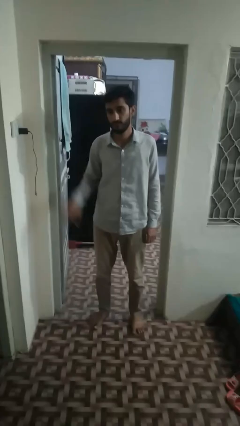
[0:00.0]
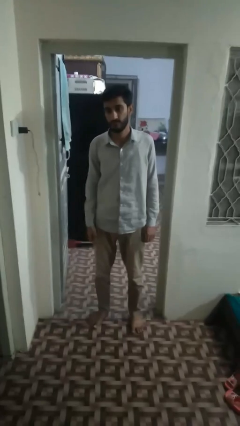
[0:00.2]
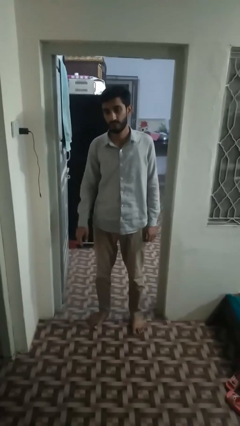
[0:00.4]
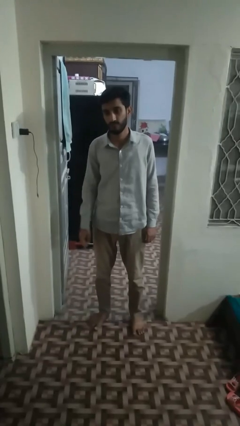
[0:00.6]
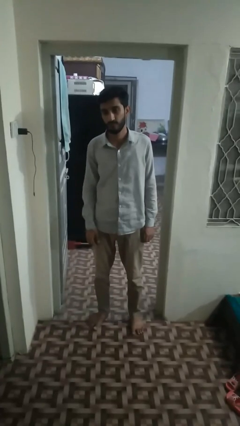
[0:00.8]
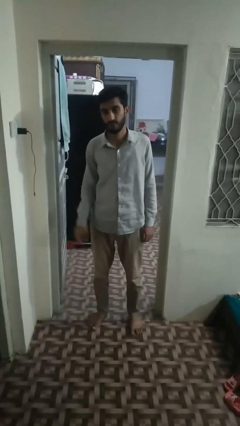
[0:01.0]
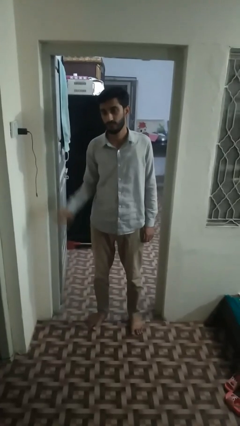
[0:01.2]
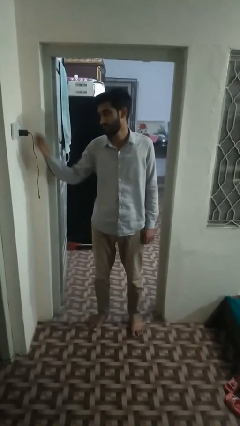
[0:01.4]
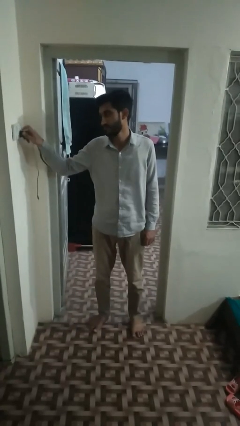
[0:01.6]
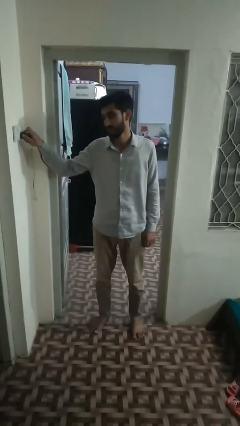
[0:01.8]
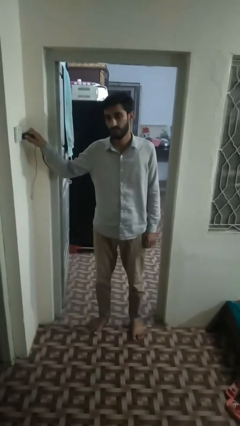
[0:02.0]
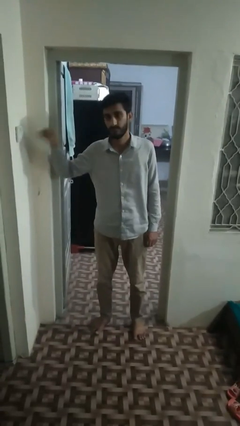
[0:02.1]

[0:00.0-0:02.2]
person unplugs from electrical socket

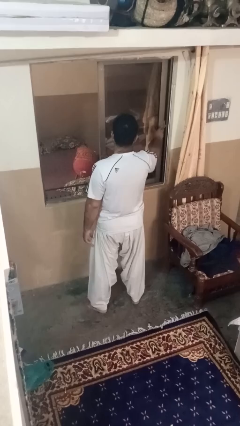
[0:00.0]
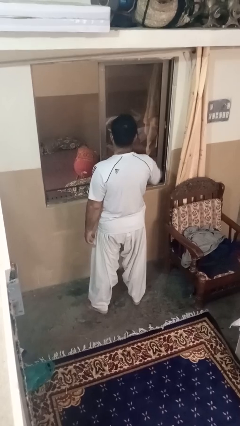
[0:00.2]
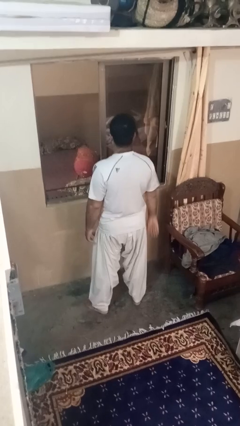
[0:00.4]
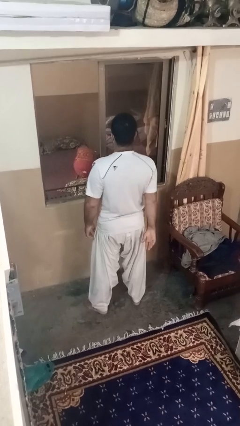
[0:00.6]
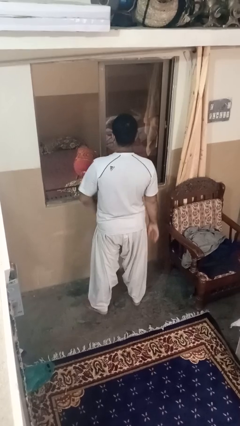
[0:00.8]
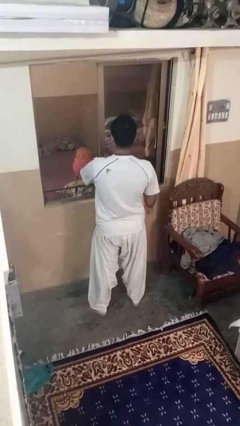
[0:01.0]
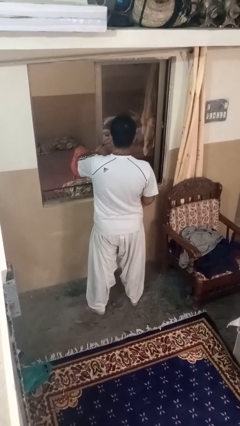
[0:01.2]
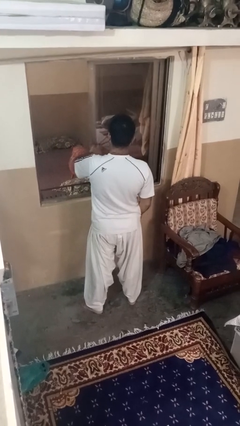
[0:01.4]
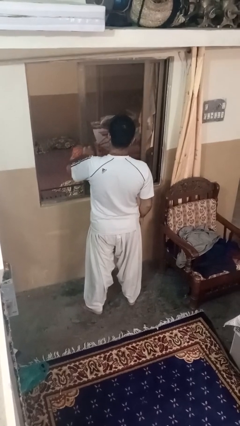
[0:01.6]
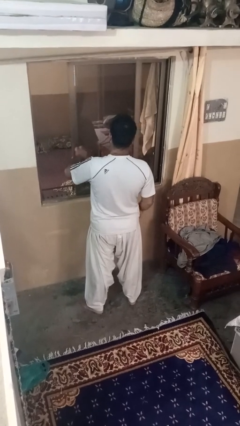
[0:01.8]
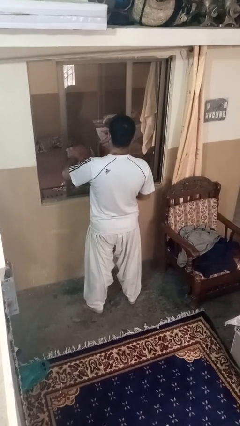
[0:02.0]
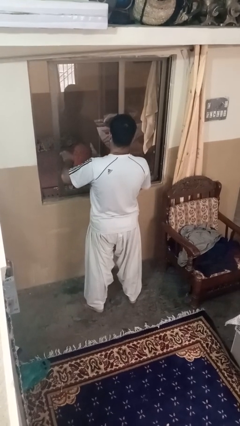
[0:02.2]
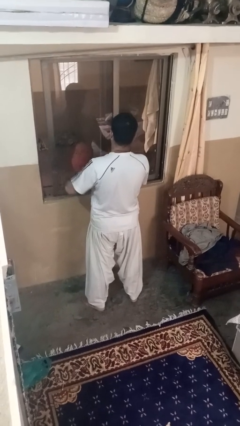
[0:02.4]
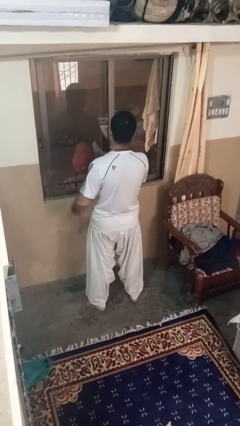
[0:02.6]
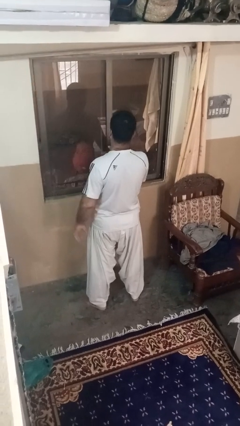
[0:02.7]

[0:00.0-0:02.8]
person closes home window

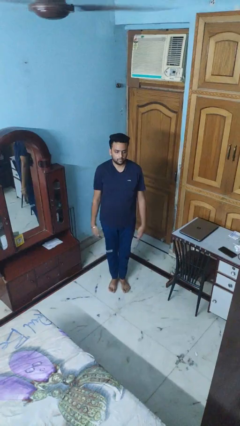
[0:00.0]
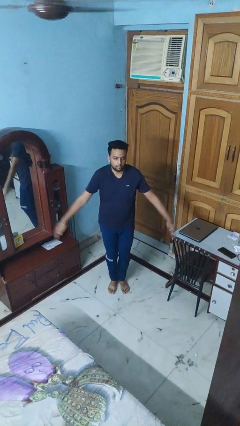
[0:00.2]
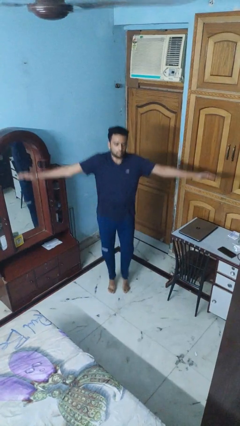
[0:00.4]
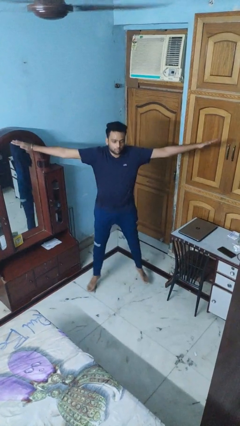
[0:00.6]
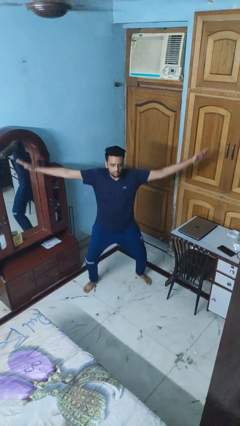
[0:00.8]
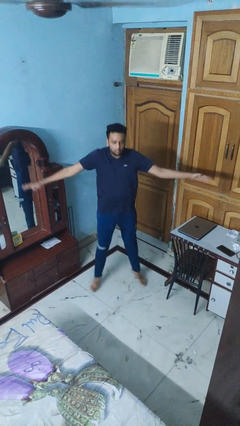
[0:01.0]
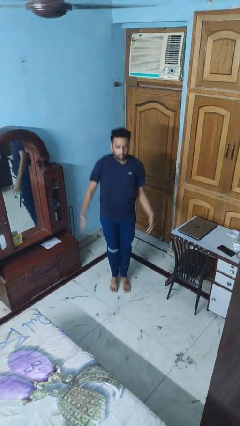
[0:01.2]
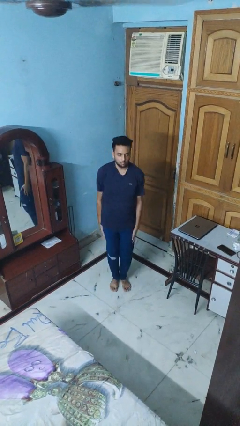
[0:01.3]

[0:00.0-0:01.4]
person exercises with jumping jacks

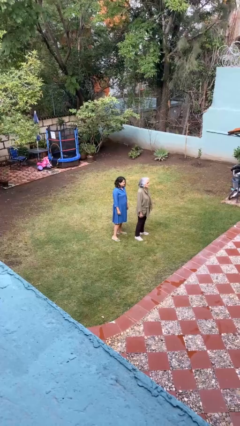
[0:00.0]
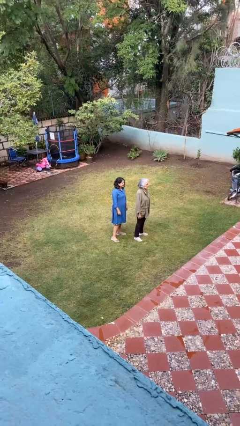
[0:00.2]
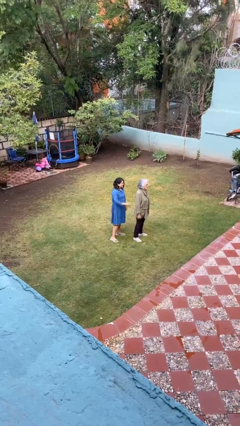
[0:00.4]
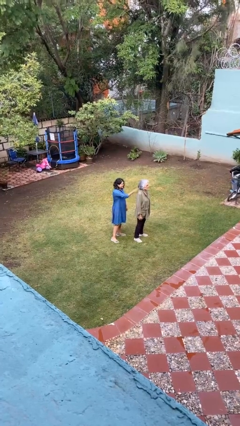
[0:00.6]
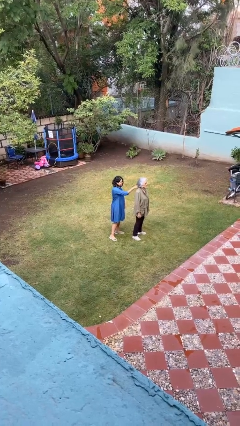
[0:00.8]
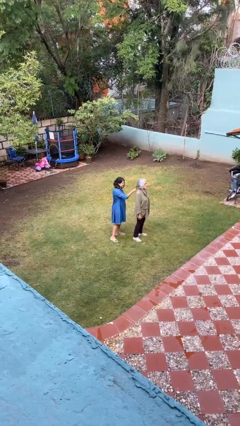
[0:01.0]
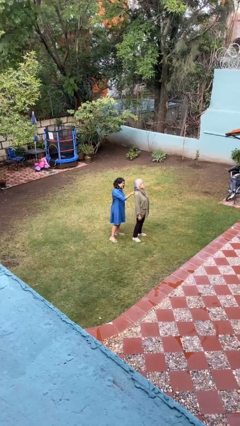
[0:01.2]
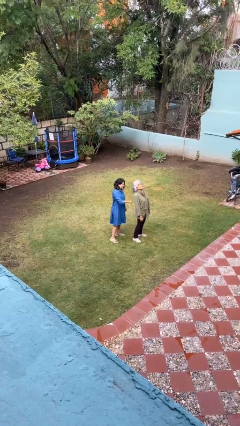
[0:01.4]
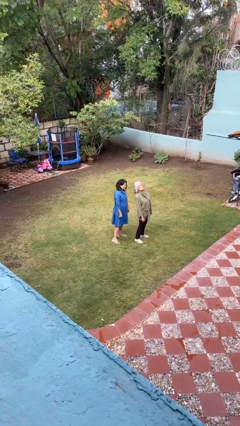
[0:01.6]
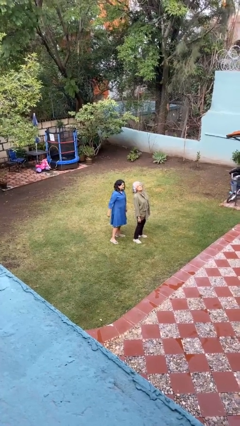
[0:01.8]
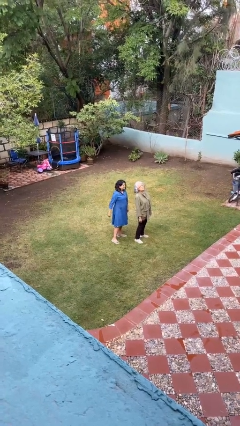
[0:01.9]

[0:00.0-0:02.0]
person grabs person by hair

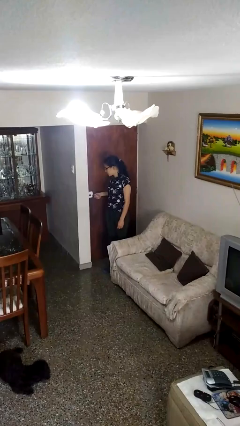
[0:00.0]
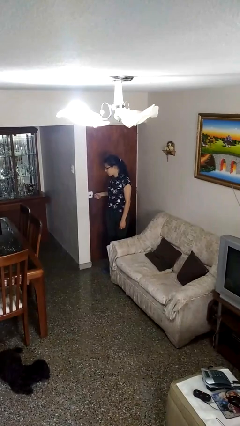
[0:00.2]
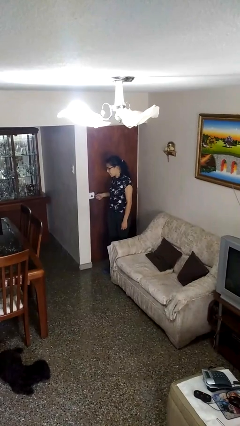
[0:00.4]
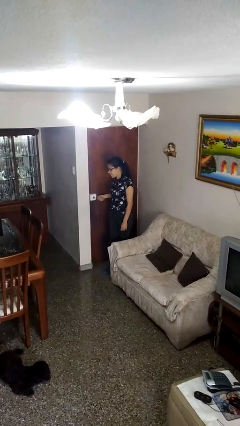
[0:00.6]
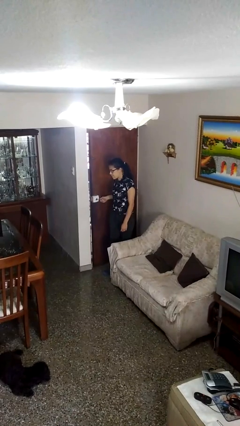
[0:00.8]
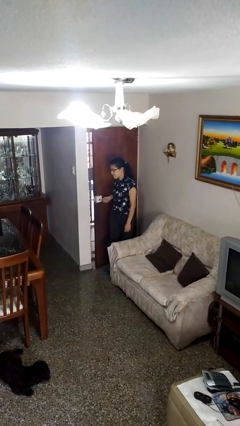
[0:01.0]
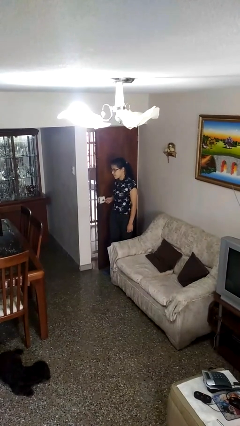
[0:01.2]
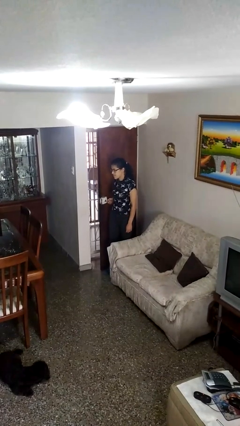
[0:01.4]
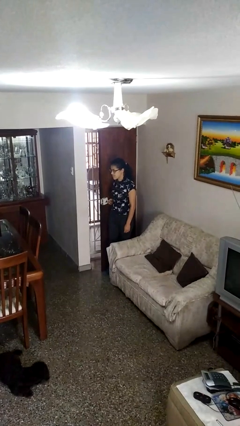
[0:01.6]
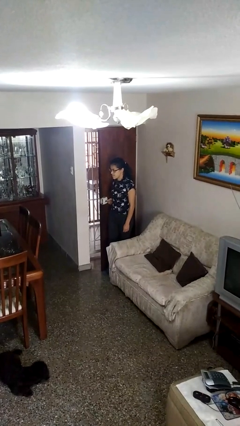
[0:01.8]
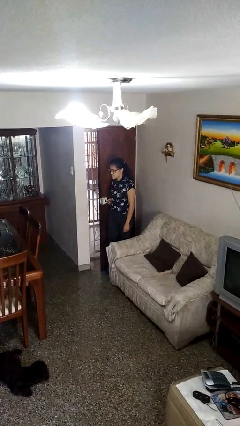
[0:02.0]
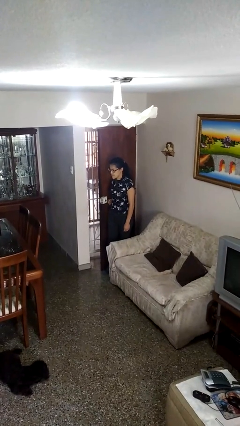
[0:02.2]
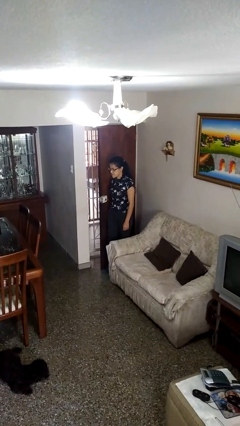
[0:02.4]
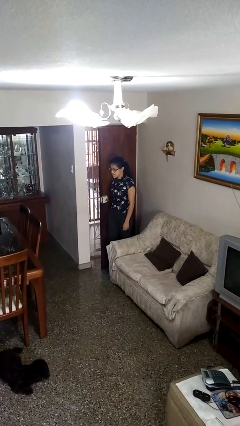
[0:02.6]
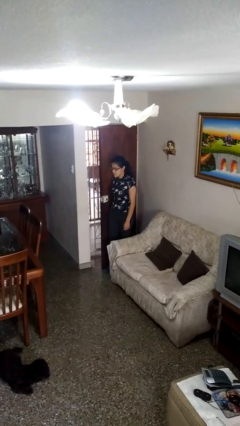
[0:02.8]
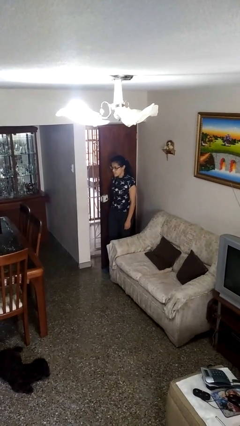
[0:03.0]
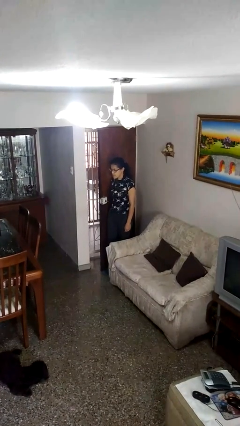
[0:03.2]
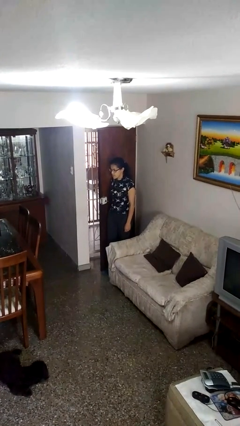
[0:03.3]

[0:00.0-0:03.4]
person opens facility door

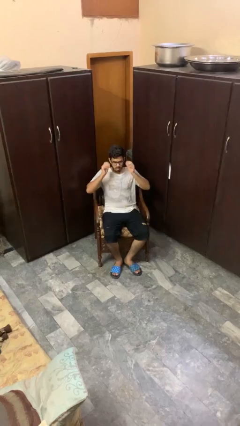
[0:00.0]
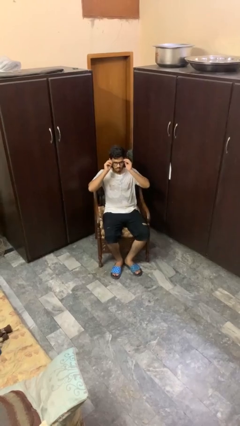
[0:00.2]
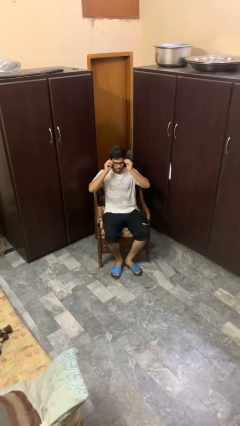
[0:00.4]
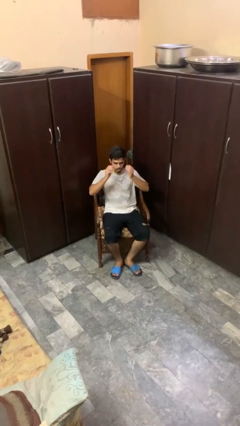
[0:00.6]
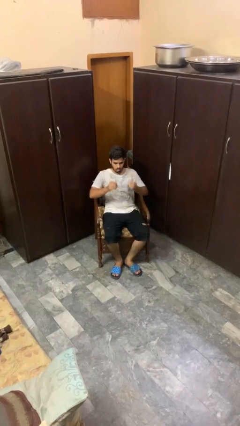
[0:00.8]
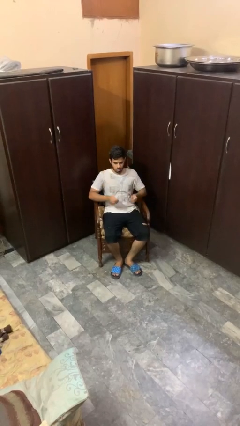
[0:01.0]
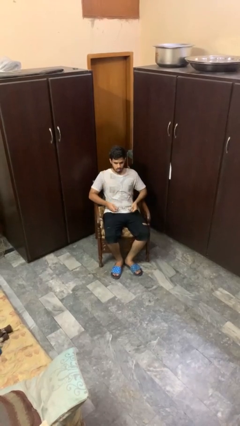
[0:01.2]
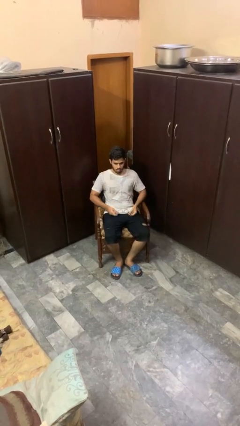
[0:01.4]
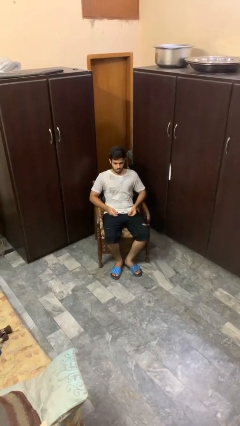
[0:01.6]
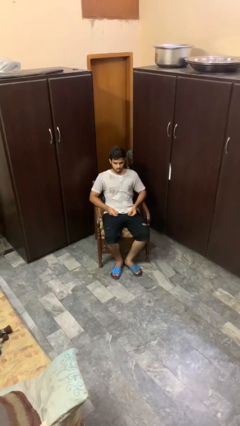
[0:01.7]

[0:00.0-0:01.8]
person takes off glasses

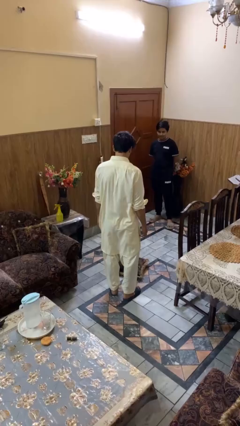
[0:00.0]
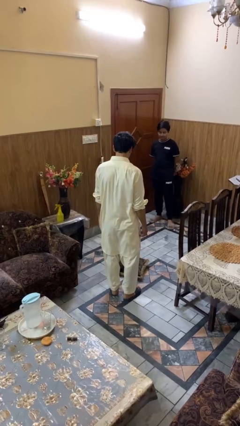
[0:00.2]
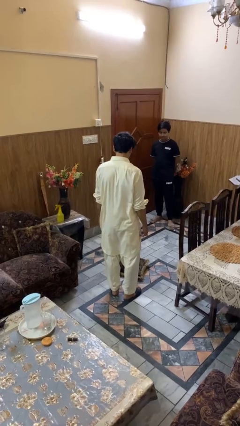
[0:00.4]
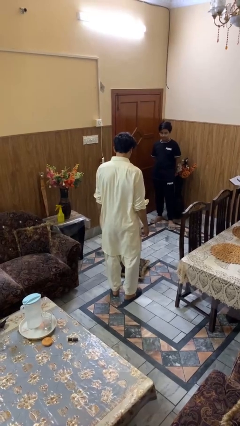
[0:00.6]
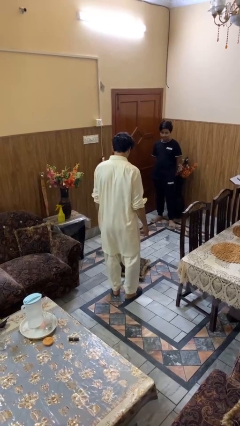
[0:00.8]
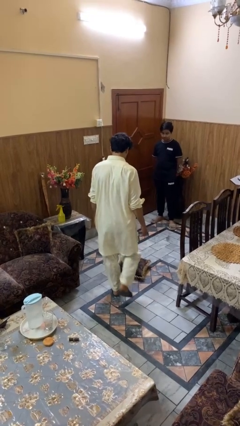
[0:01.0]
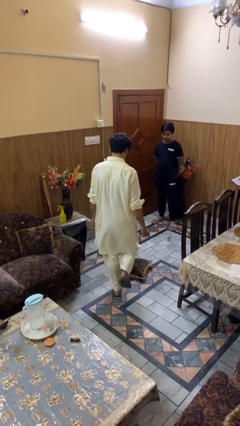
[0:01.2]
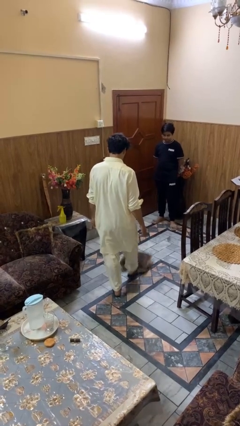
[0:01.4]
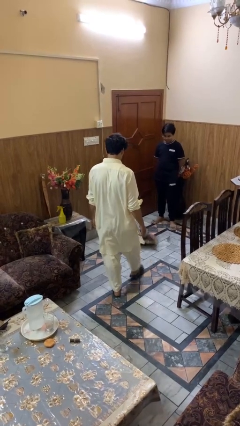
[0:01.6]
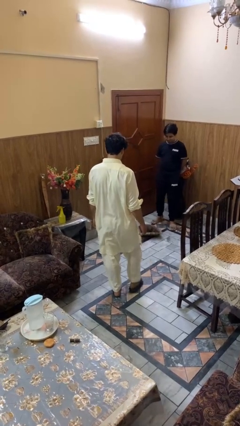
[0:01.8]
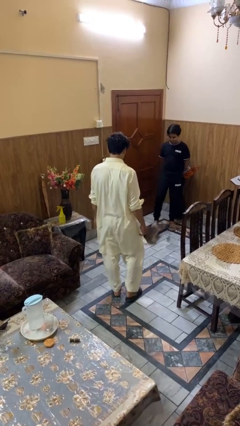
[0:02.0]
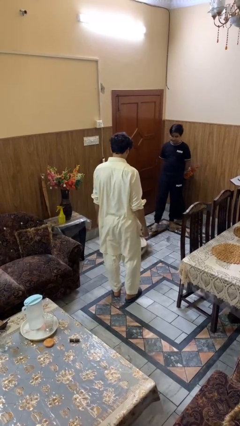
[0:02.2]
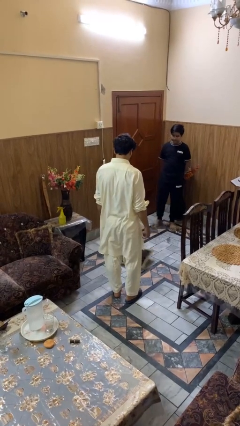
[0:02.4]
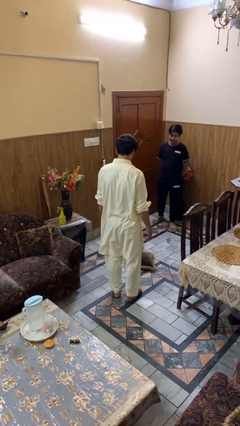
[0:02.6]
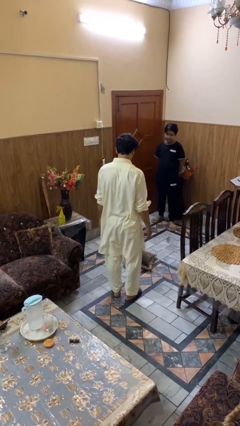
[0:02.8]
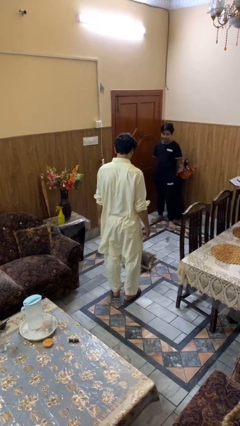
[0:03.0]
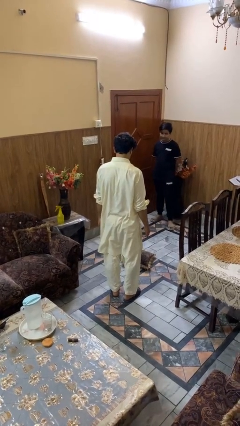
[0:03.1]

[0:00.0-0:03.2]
person kicks object to person

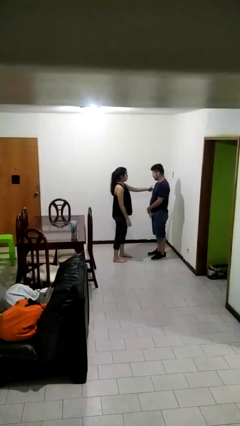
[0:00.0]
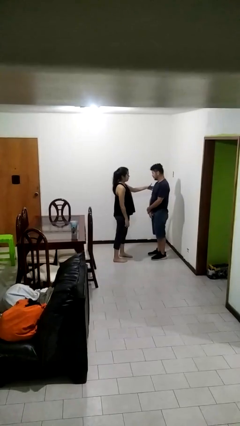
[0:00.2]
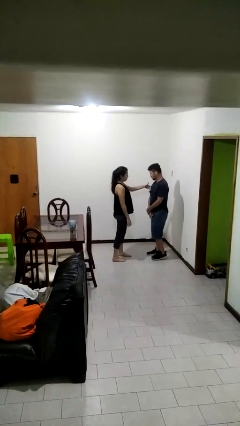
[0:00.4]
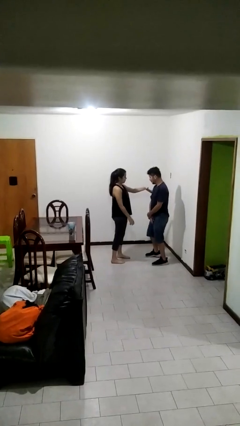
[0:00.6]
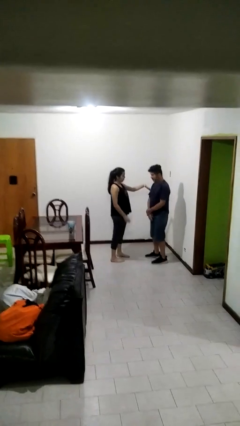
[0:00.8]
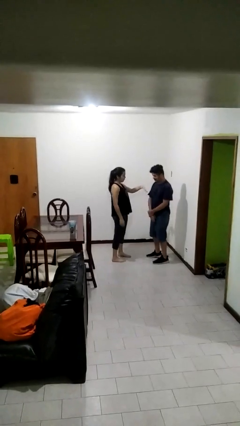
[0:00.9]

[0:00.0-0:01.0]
person shoves person
